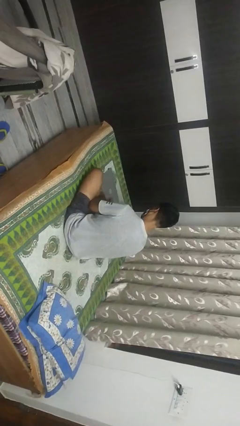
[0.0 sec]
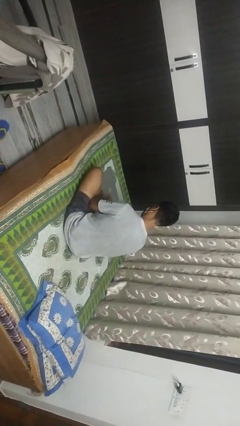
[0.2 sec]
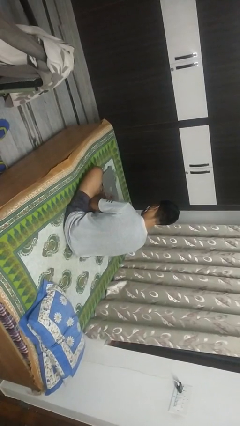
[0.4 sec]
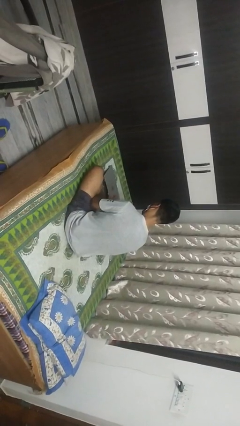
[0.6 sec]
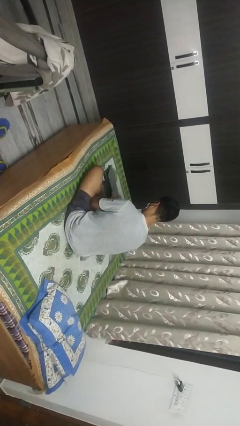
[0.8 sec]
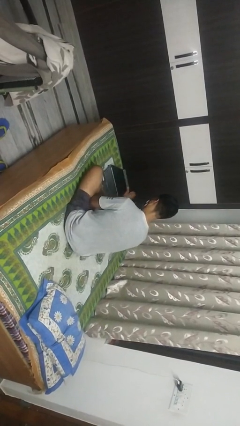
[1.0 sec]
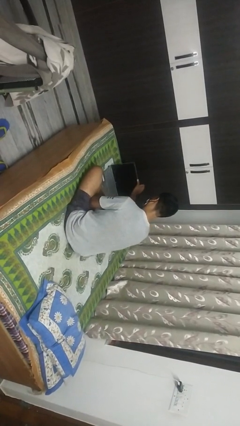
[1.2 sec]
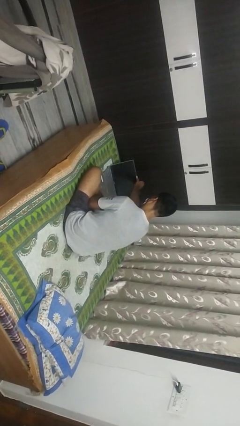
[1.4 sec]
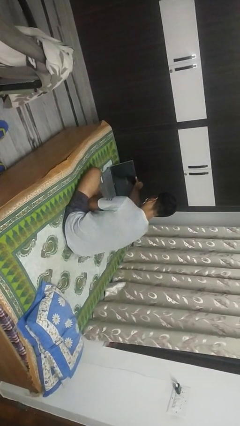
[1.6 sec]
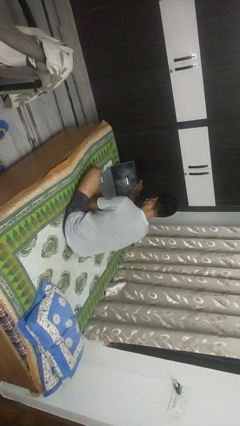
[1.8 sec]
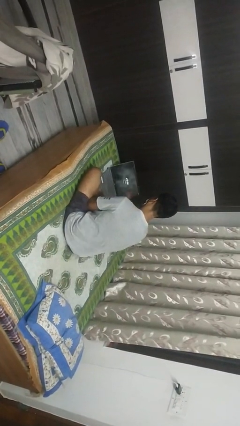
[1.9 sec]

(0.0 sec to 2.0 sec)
person opens laptop

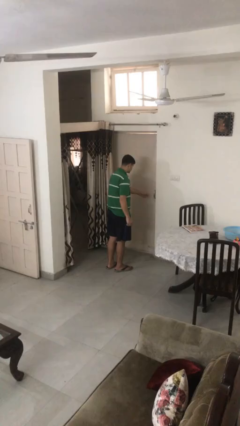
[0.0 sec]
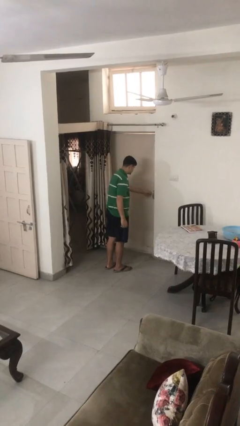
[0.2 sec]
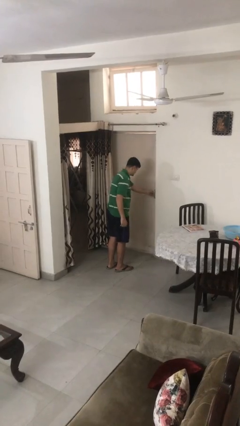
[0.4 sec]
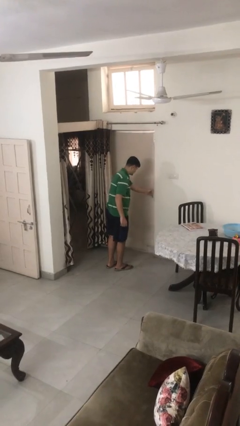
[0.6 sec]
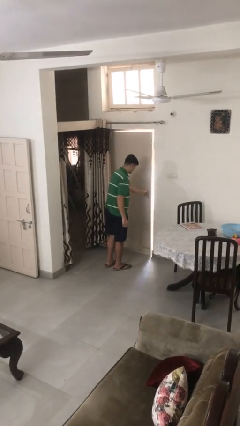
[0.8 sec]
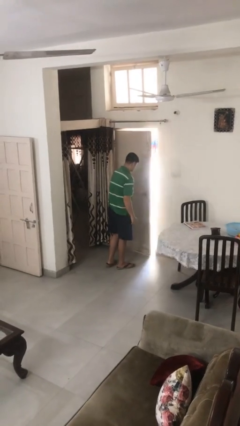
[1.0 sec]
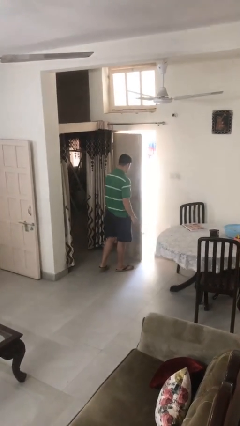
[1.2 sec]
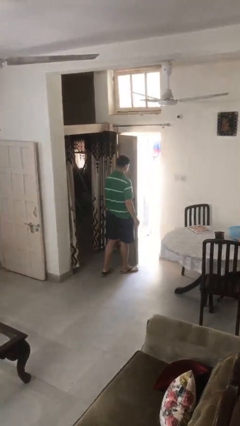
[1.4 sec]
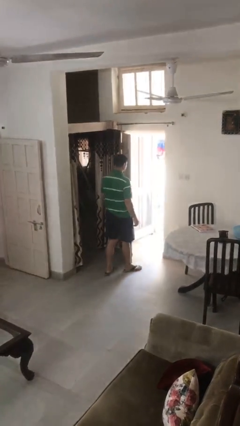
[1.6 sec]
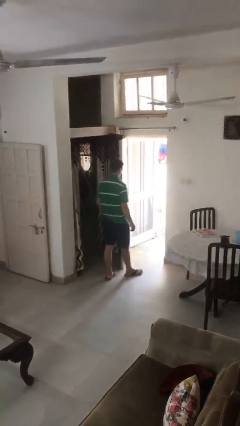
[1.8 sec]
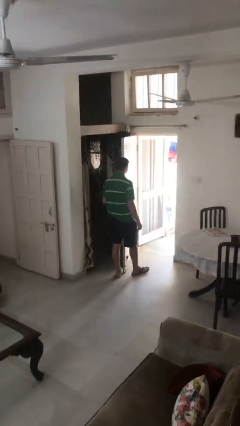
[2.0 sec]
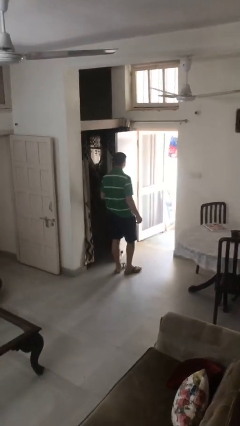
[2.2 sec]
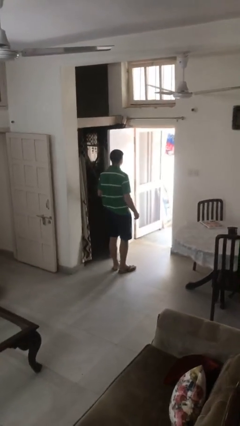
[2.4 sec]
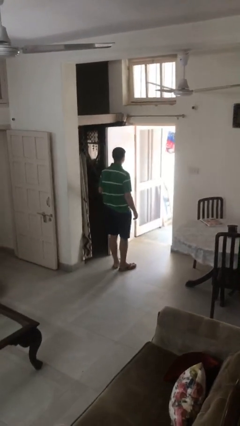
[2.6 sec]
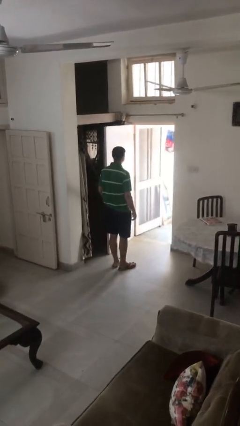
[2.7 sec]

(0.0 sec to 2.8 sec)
person opens facility door

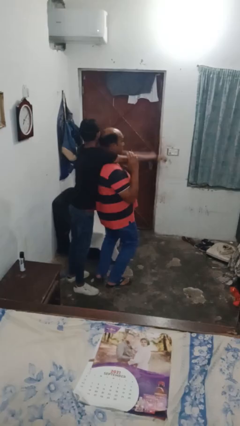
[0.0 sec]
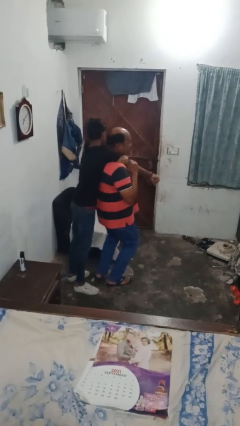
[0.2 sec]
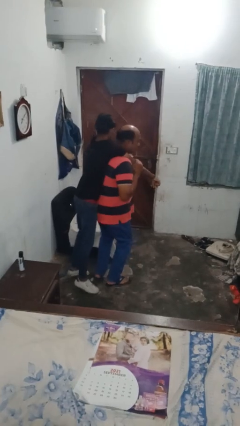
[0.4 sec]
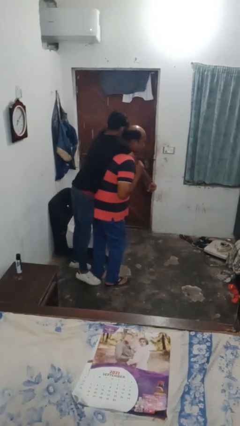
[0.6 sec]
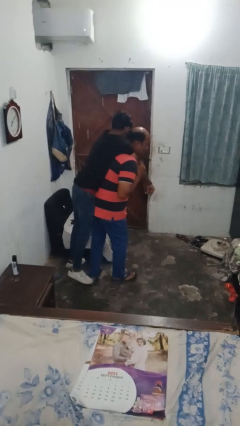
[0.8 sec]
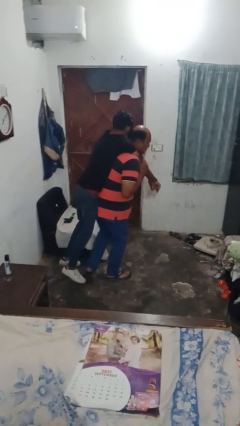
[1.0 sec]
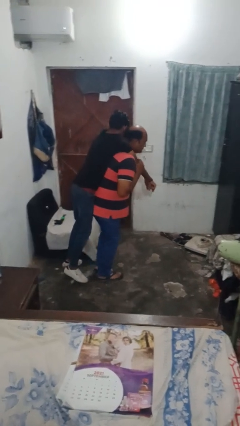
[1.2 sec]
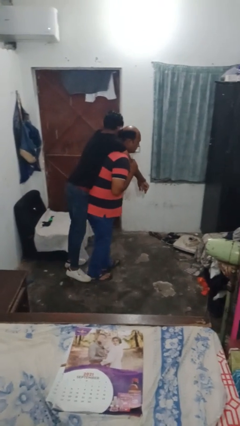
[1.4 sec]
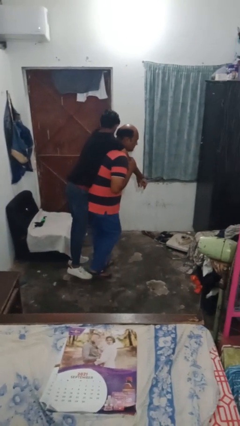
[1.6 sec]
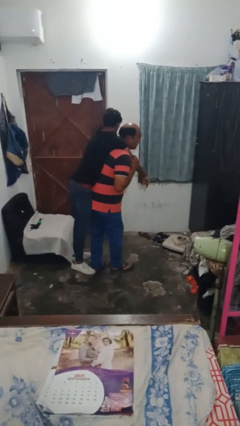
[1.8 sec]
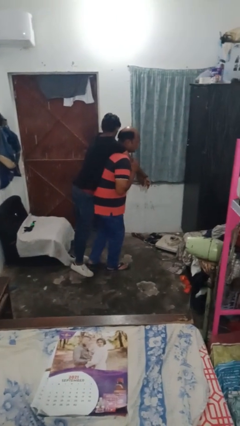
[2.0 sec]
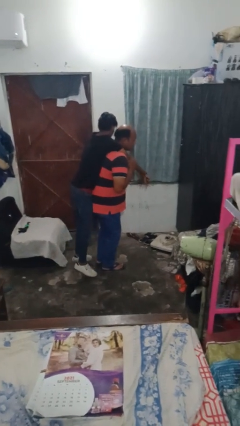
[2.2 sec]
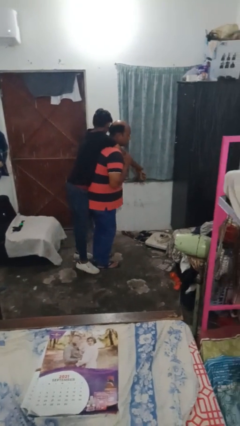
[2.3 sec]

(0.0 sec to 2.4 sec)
person carries person on back

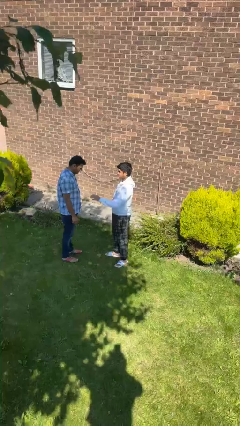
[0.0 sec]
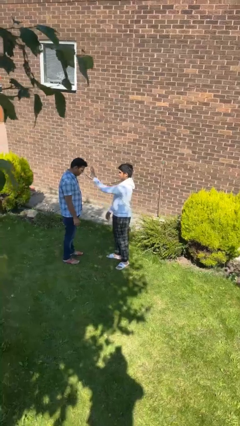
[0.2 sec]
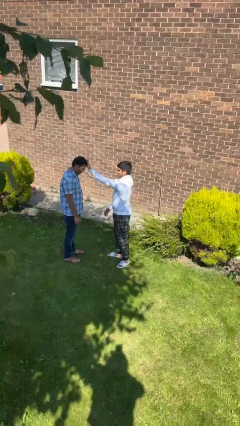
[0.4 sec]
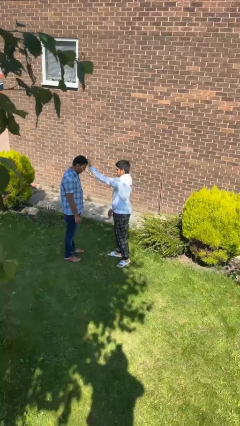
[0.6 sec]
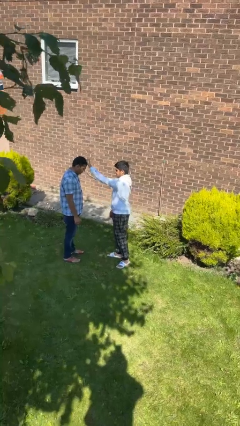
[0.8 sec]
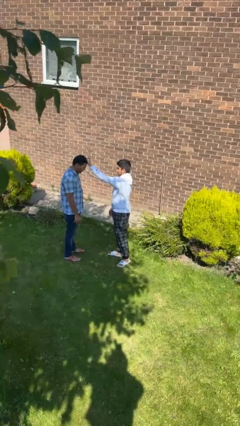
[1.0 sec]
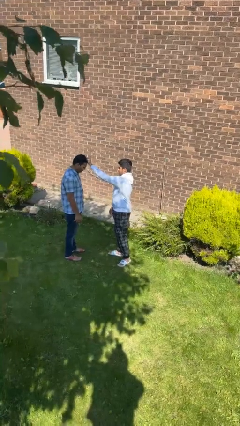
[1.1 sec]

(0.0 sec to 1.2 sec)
person grabs person by hair

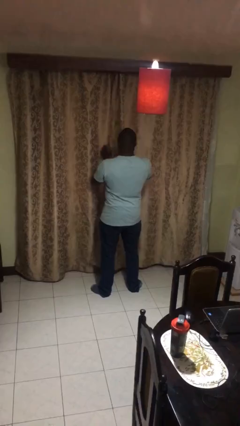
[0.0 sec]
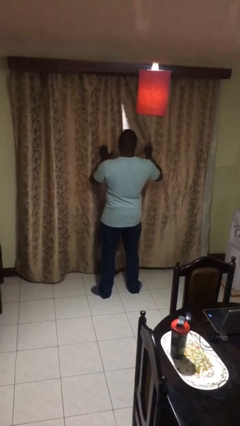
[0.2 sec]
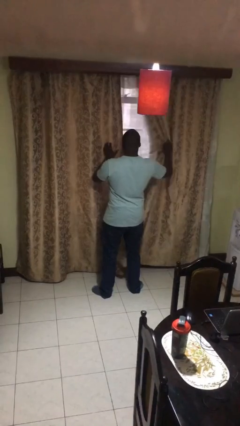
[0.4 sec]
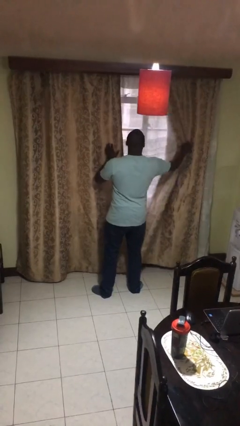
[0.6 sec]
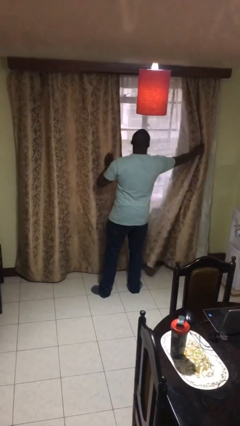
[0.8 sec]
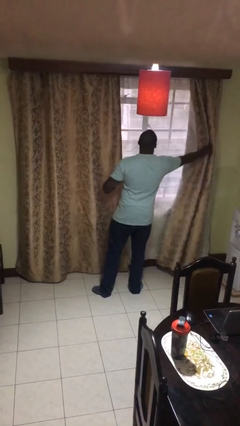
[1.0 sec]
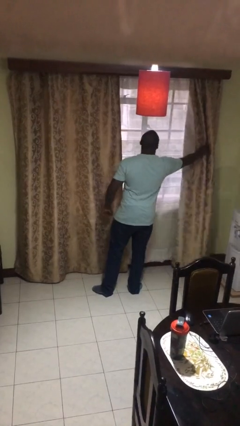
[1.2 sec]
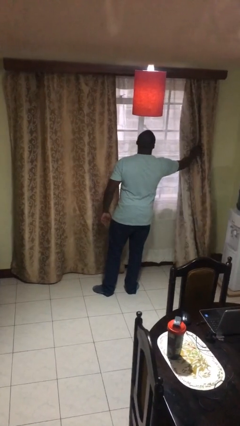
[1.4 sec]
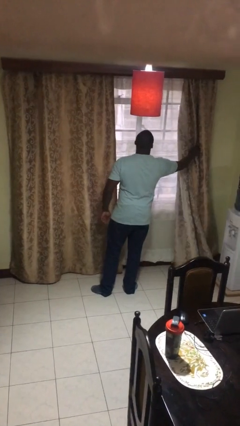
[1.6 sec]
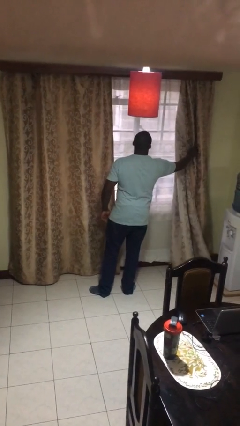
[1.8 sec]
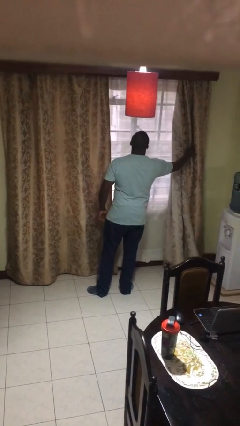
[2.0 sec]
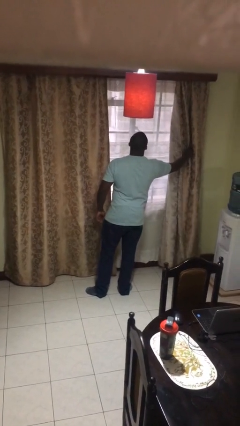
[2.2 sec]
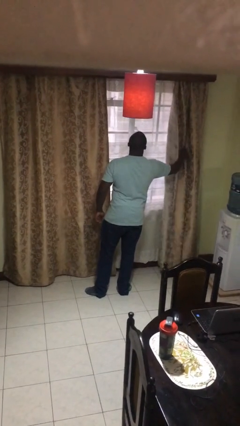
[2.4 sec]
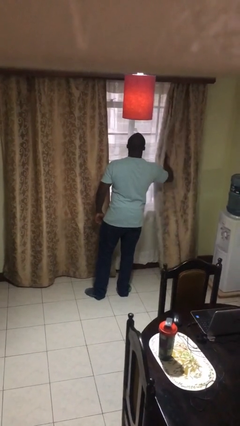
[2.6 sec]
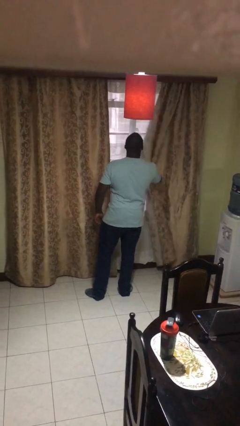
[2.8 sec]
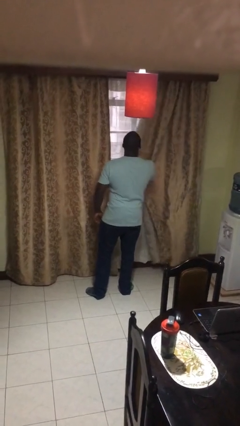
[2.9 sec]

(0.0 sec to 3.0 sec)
person opens curtains

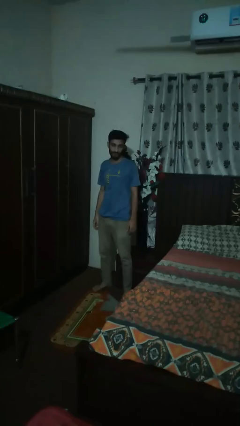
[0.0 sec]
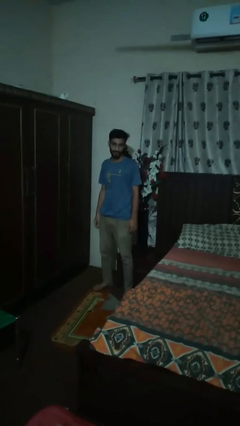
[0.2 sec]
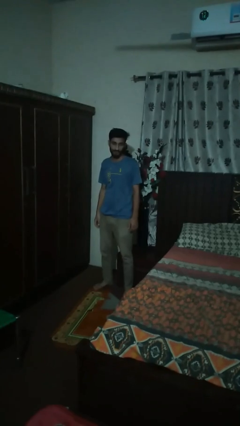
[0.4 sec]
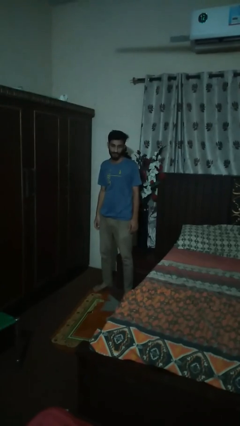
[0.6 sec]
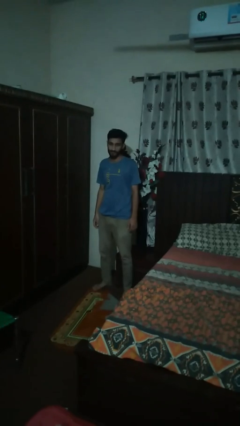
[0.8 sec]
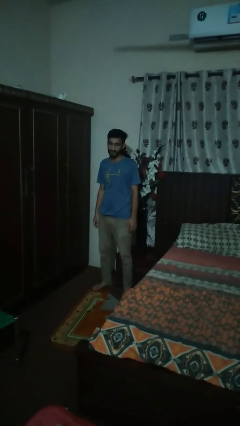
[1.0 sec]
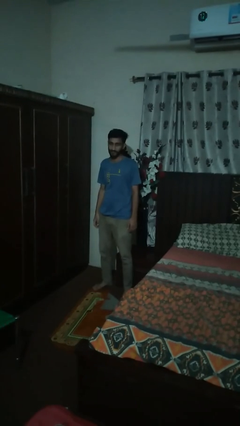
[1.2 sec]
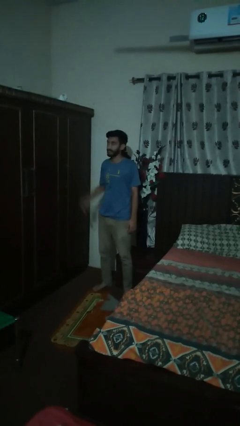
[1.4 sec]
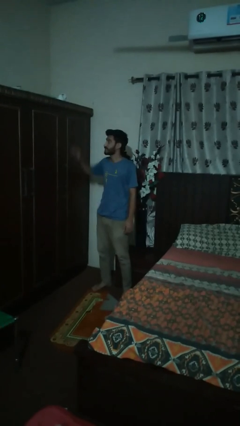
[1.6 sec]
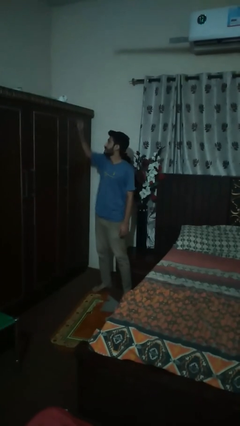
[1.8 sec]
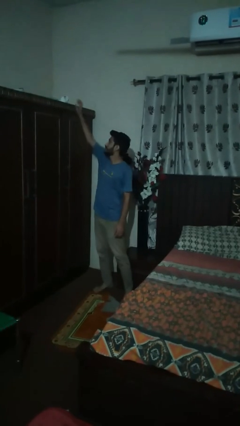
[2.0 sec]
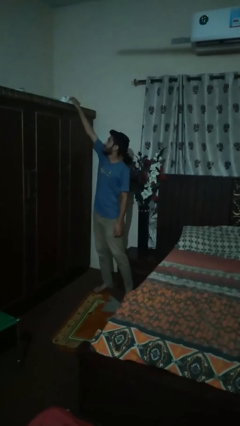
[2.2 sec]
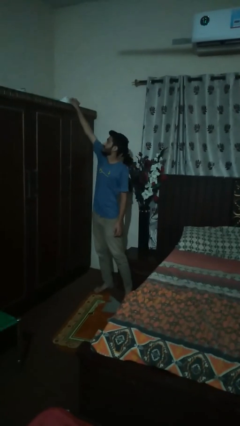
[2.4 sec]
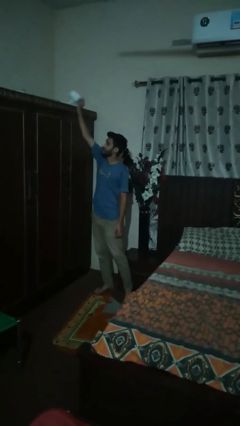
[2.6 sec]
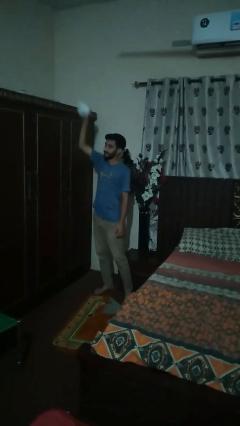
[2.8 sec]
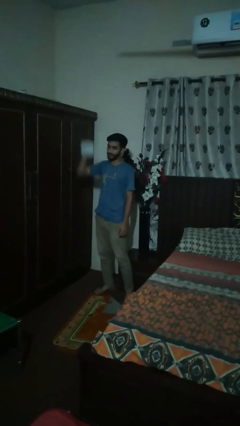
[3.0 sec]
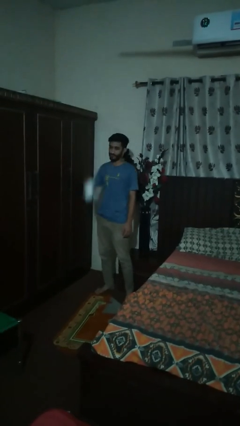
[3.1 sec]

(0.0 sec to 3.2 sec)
person puts down object on shelf

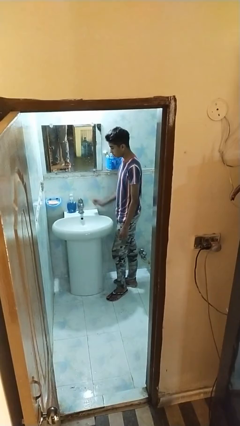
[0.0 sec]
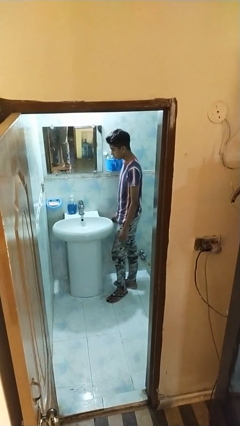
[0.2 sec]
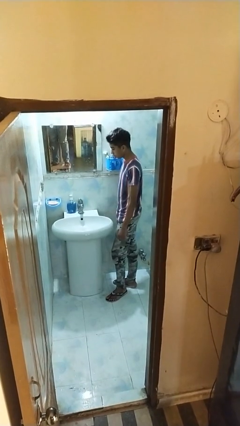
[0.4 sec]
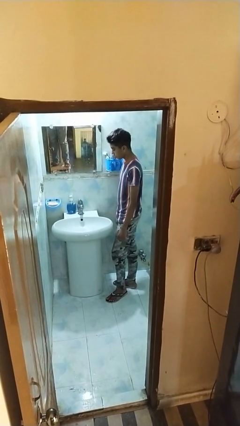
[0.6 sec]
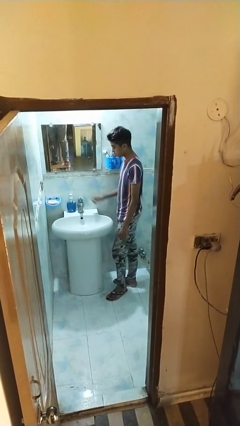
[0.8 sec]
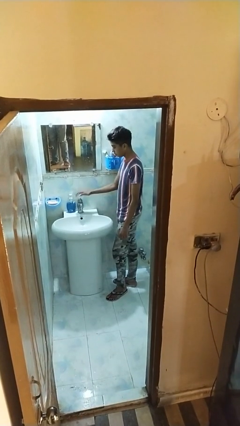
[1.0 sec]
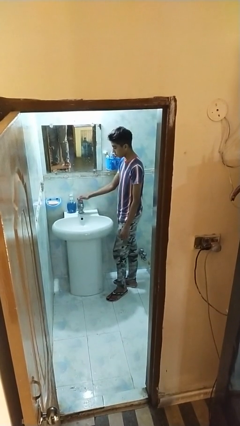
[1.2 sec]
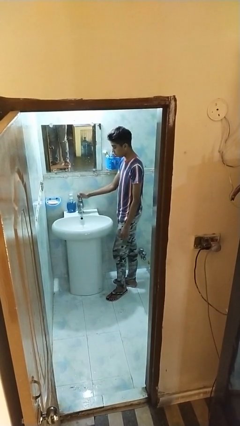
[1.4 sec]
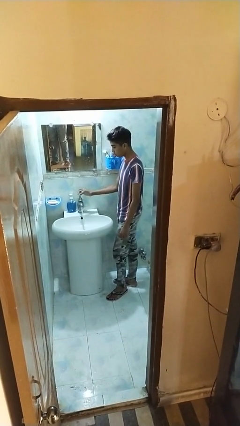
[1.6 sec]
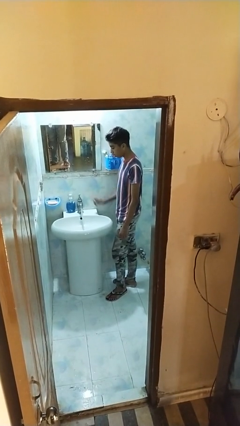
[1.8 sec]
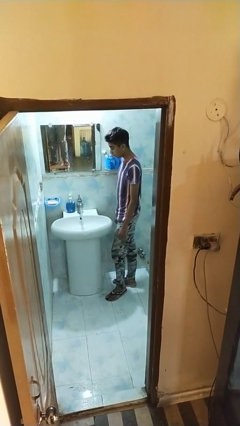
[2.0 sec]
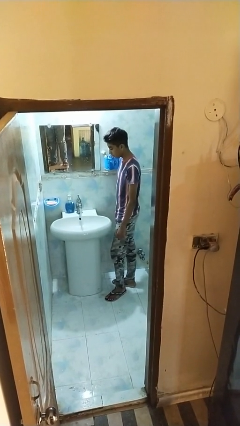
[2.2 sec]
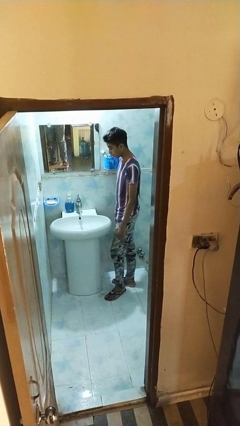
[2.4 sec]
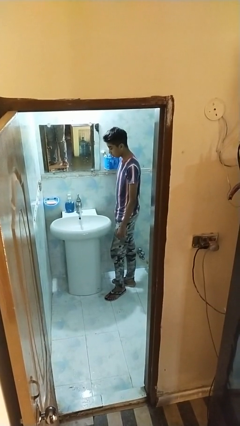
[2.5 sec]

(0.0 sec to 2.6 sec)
person turns on faucet

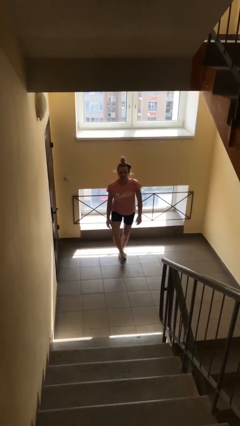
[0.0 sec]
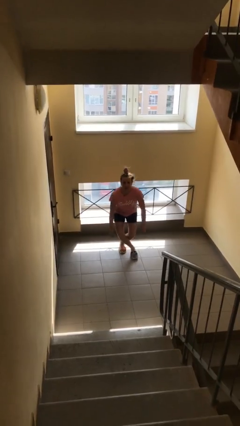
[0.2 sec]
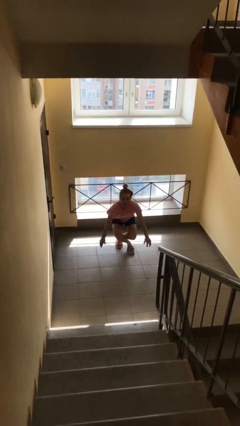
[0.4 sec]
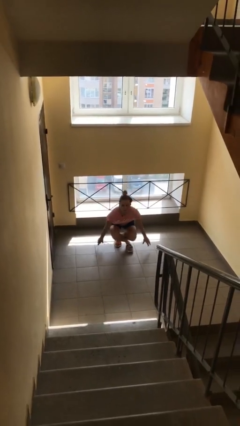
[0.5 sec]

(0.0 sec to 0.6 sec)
person sits crisscross
